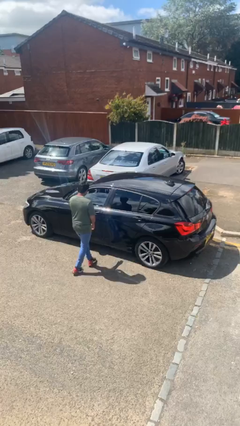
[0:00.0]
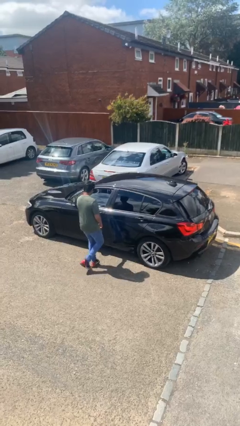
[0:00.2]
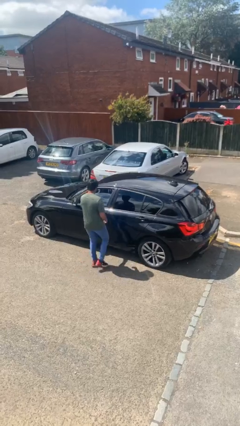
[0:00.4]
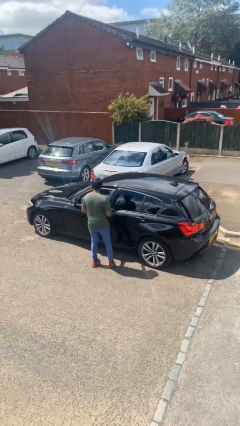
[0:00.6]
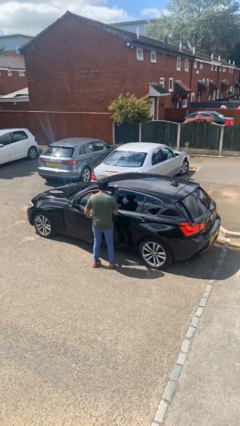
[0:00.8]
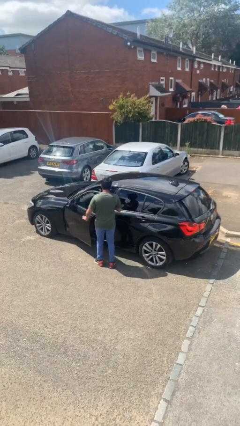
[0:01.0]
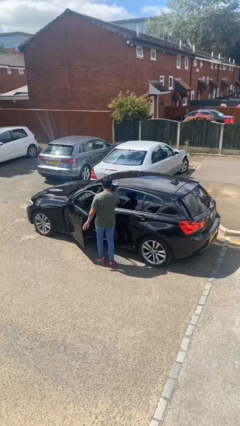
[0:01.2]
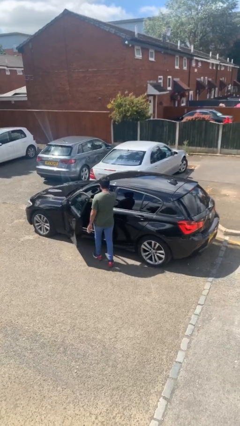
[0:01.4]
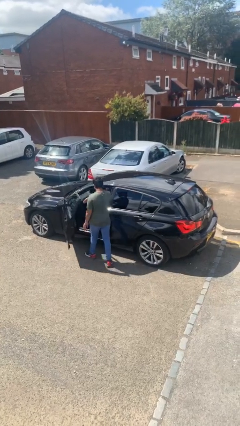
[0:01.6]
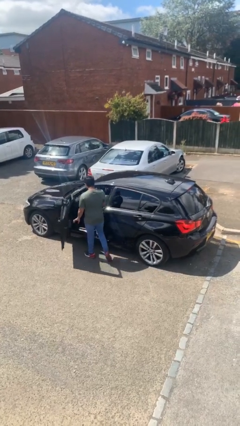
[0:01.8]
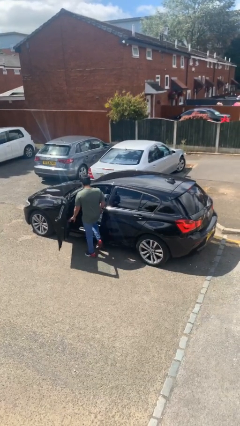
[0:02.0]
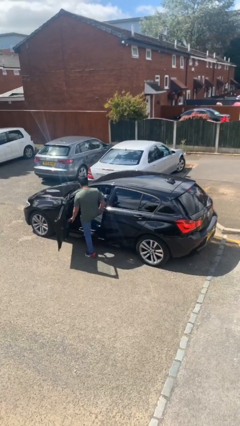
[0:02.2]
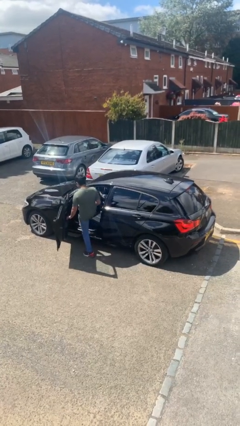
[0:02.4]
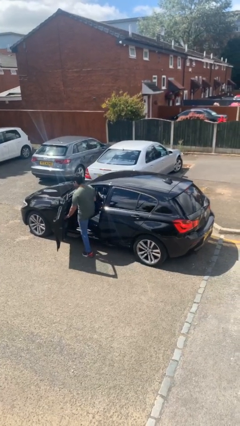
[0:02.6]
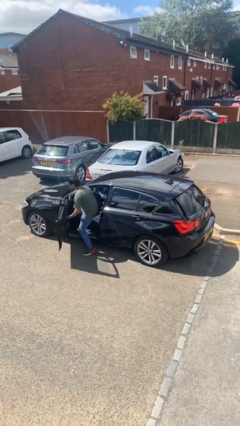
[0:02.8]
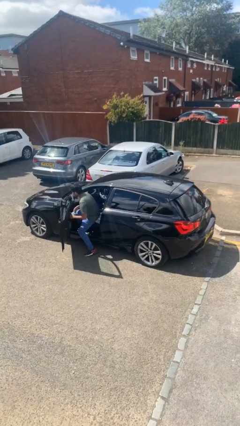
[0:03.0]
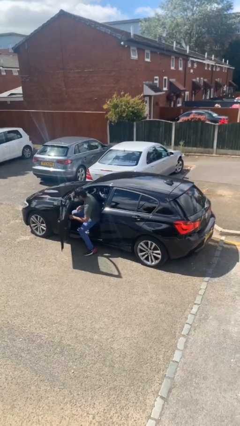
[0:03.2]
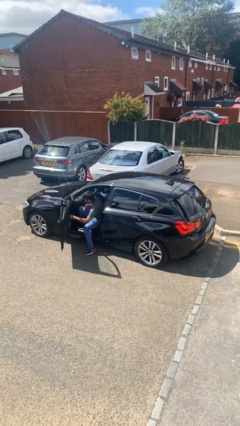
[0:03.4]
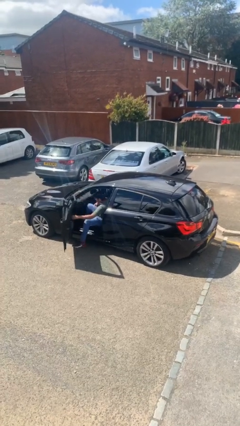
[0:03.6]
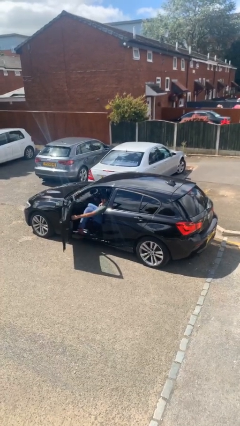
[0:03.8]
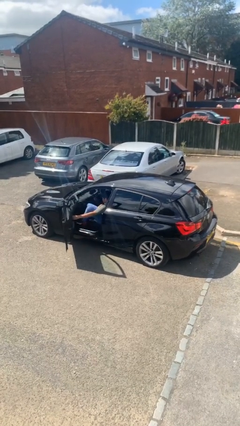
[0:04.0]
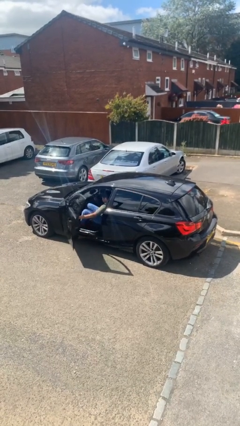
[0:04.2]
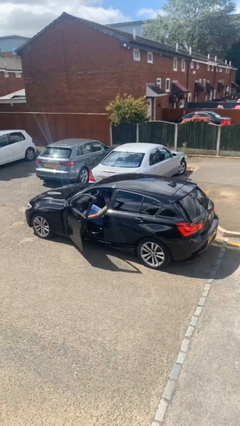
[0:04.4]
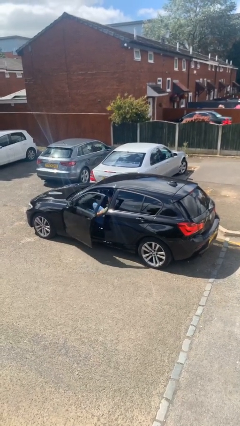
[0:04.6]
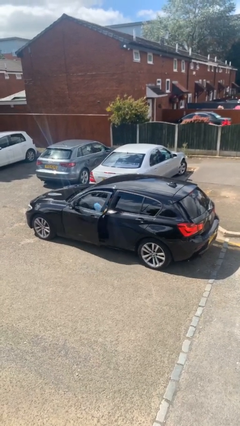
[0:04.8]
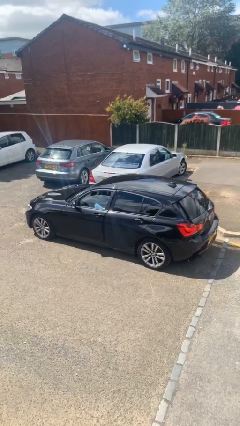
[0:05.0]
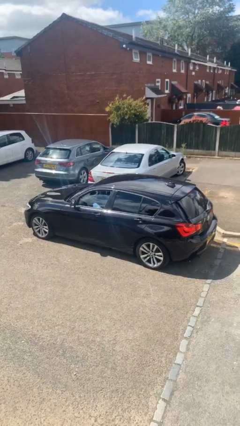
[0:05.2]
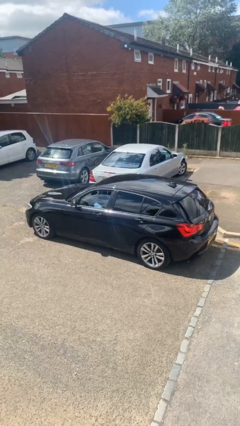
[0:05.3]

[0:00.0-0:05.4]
car picks up person

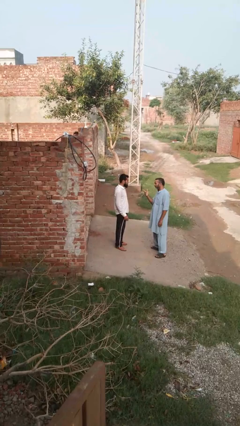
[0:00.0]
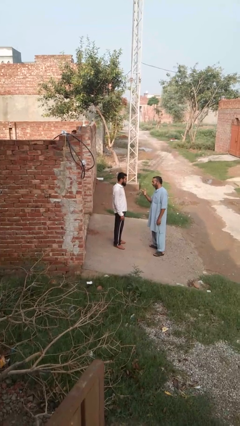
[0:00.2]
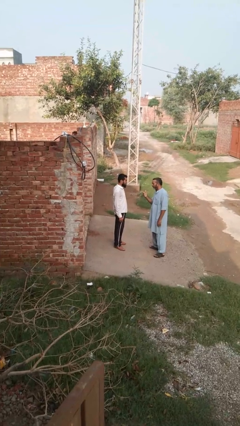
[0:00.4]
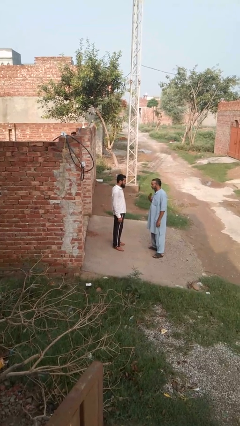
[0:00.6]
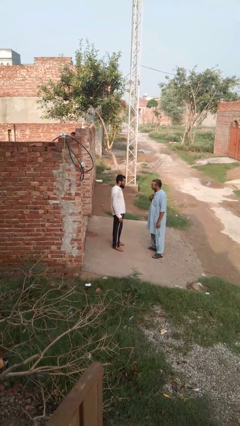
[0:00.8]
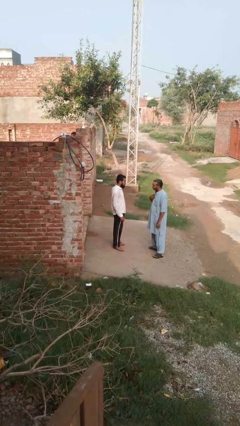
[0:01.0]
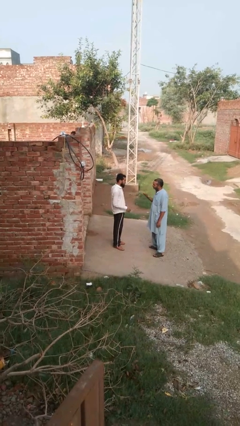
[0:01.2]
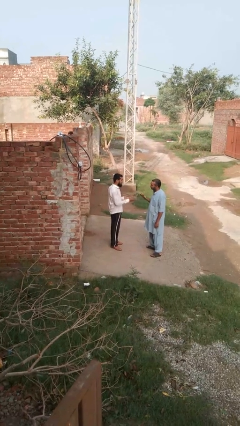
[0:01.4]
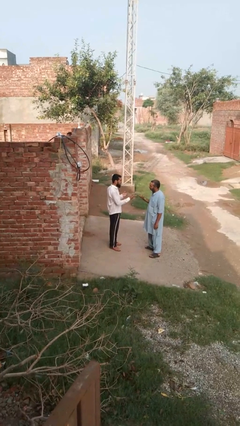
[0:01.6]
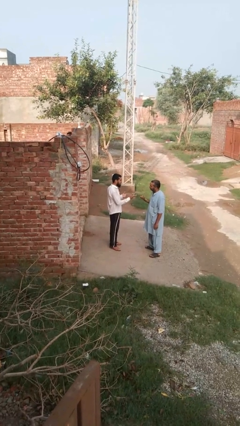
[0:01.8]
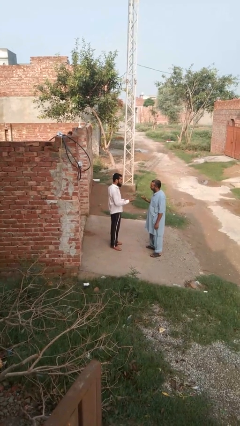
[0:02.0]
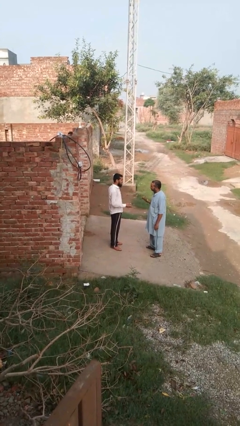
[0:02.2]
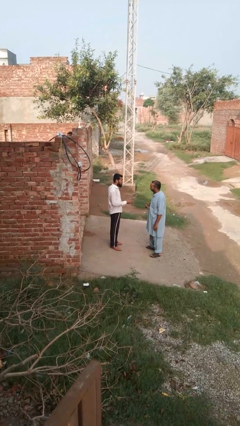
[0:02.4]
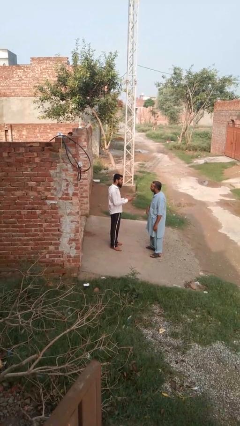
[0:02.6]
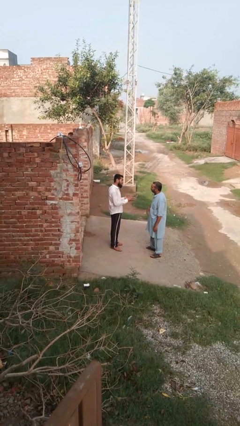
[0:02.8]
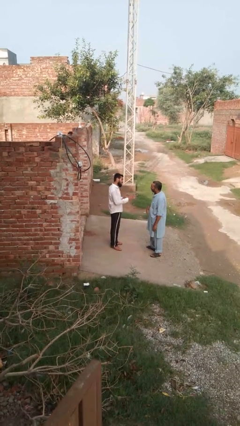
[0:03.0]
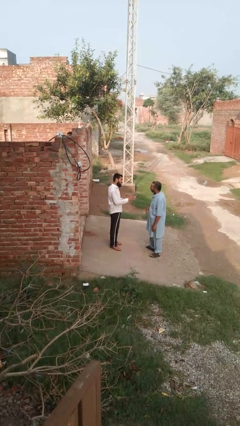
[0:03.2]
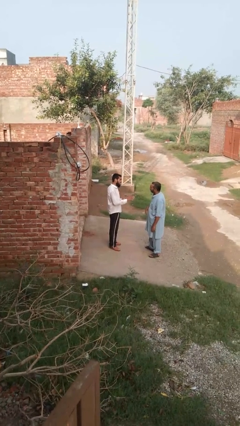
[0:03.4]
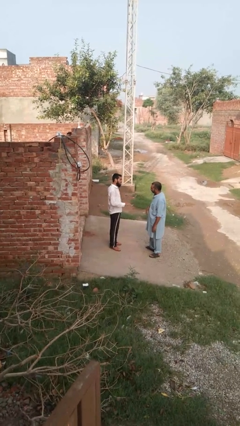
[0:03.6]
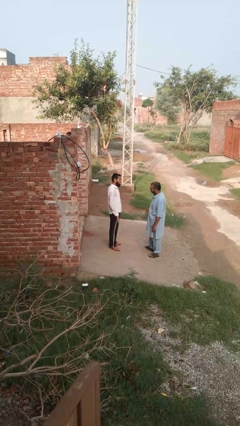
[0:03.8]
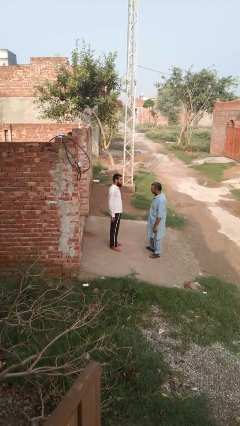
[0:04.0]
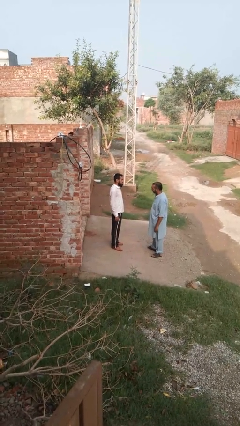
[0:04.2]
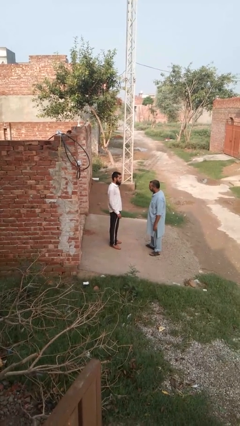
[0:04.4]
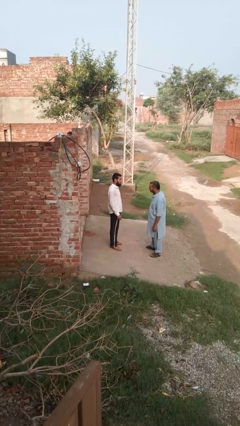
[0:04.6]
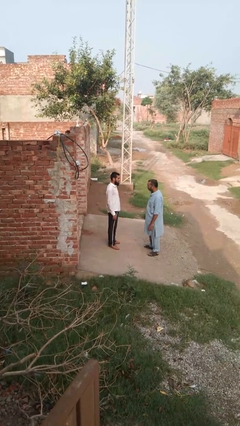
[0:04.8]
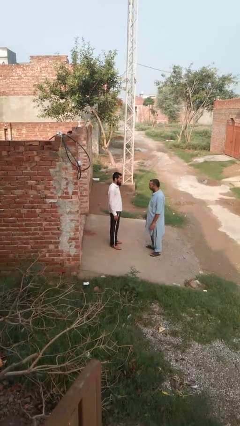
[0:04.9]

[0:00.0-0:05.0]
person talks to person

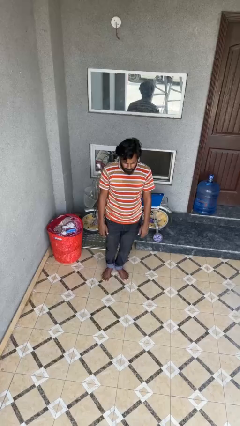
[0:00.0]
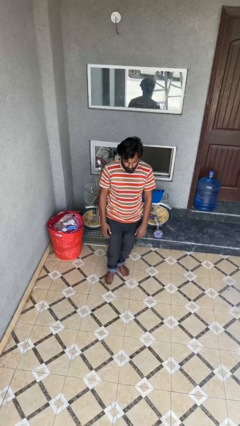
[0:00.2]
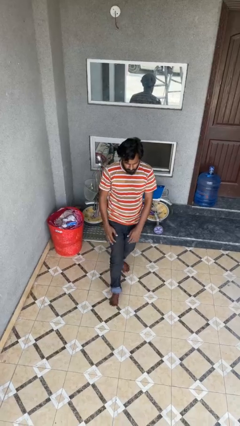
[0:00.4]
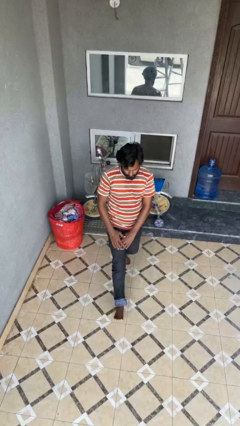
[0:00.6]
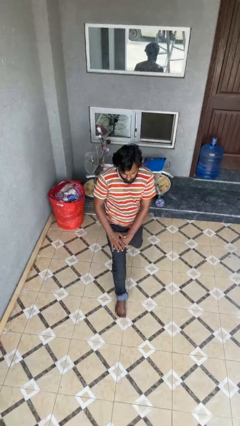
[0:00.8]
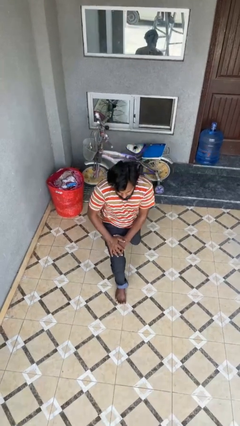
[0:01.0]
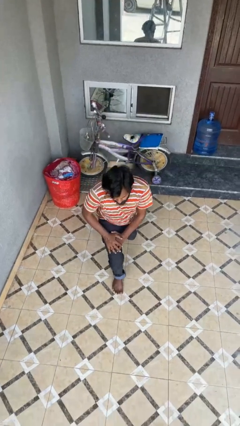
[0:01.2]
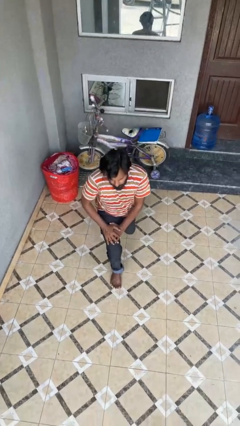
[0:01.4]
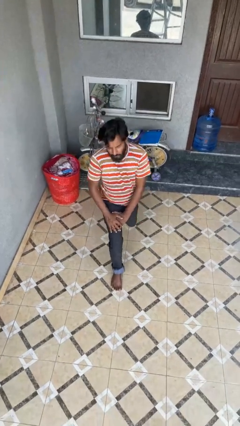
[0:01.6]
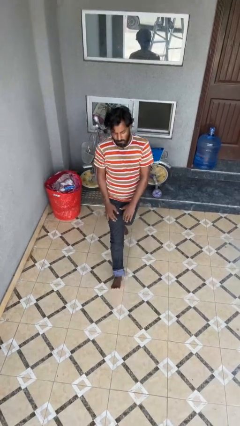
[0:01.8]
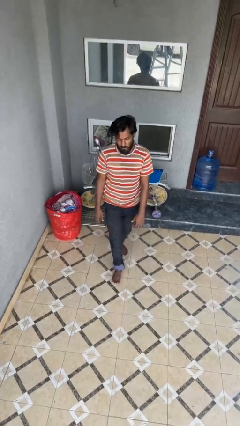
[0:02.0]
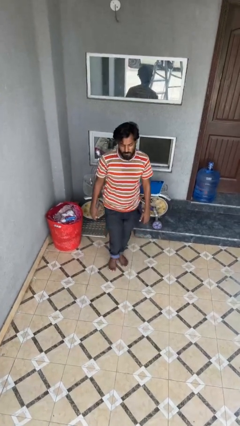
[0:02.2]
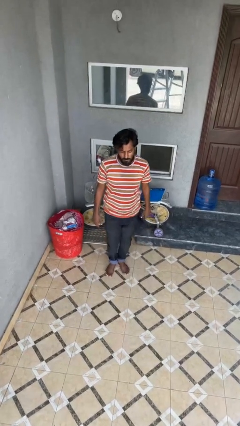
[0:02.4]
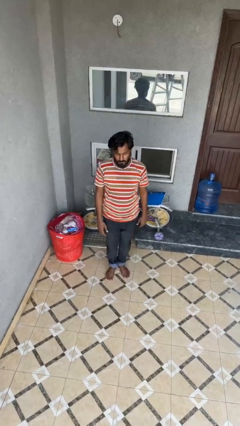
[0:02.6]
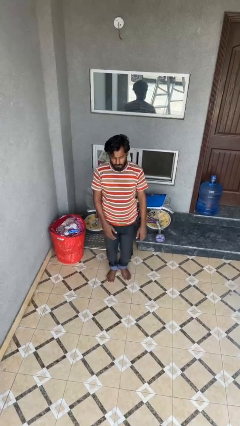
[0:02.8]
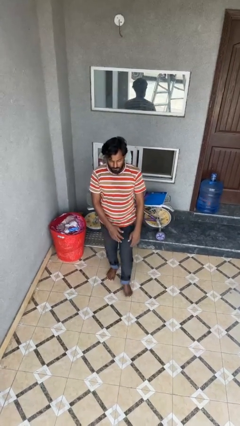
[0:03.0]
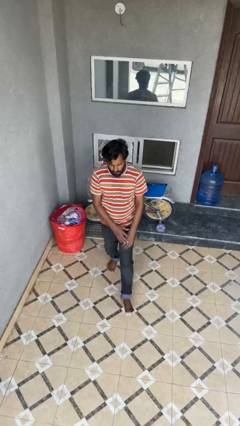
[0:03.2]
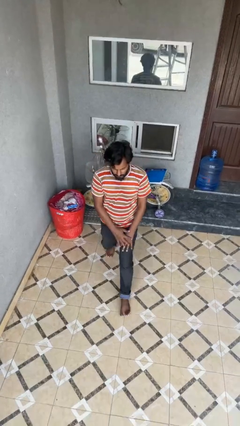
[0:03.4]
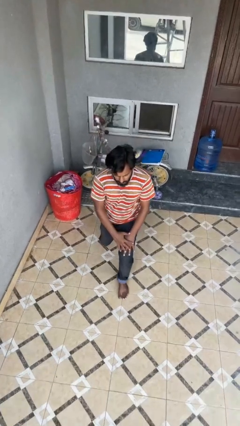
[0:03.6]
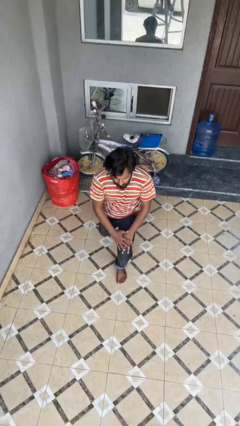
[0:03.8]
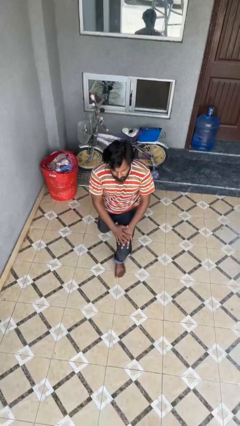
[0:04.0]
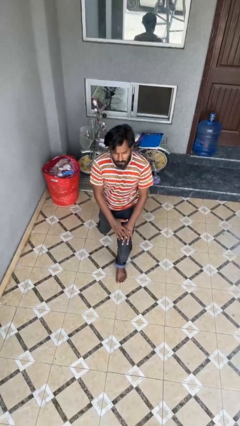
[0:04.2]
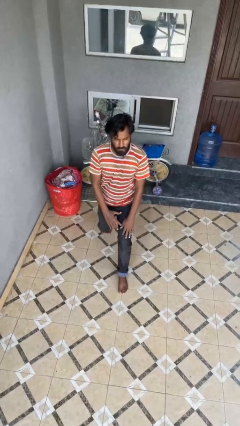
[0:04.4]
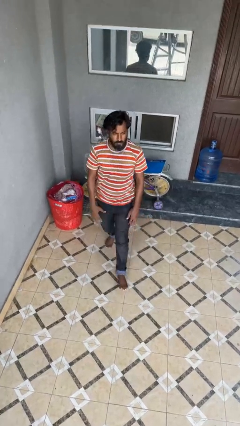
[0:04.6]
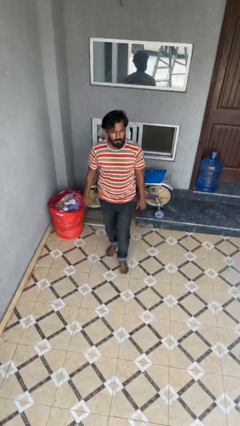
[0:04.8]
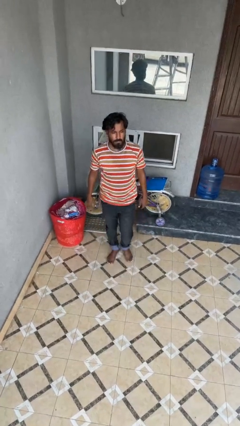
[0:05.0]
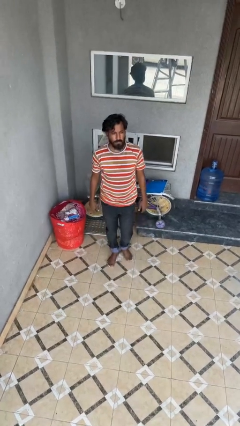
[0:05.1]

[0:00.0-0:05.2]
person exercises with lunges

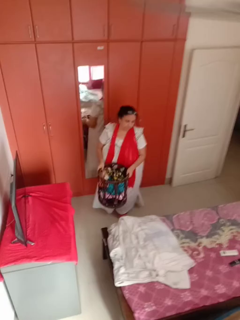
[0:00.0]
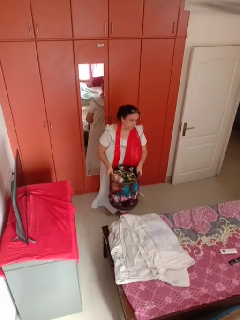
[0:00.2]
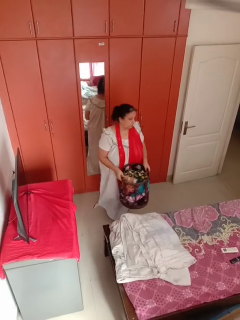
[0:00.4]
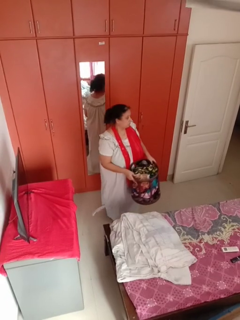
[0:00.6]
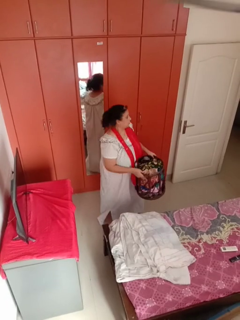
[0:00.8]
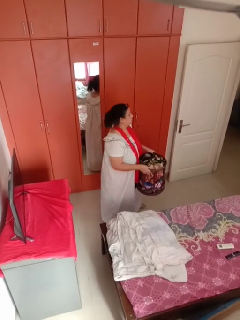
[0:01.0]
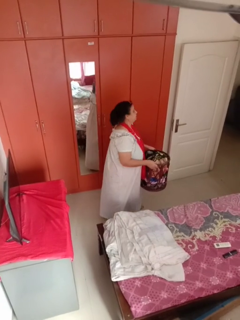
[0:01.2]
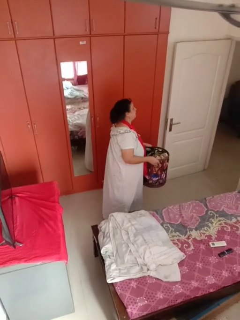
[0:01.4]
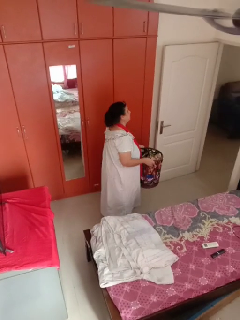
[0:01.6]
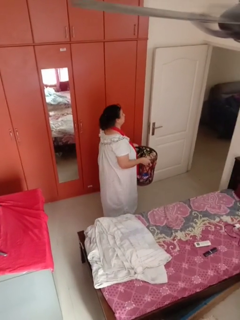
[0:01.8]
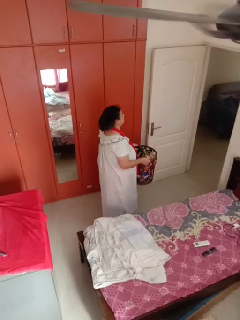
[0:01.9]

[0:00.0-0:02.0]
person carries laundry basket

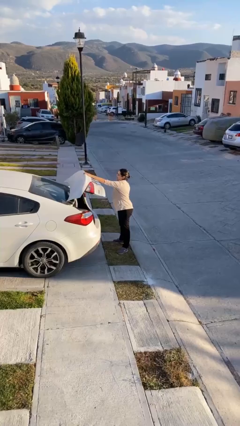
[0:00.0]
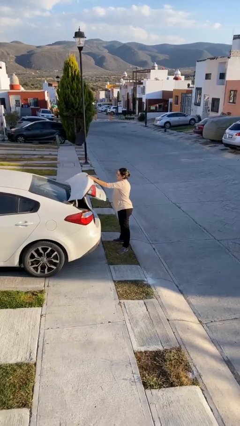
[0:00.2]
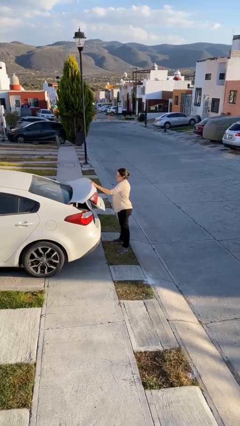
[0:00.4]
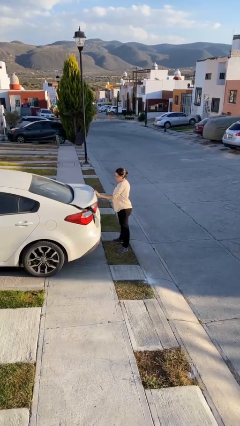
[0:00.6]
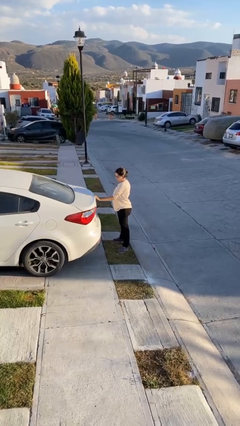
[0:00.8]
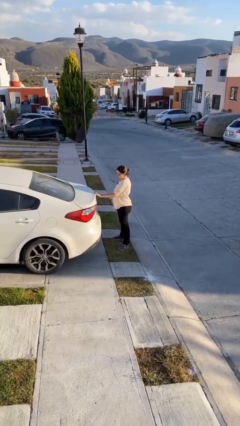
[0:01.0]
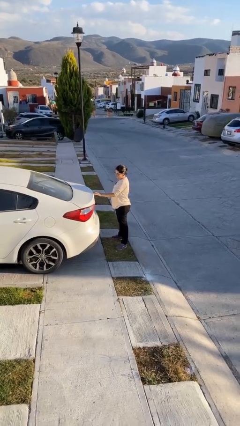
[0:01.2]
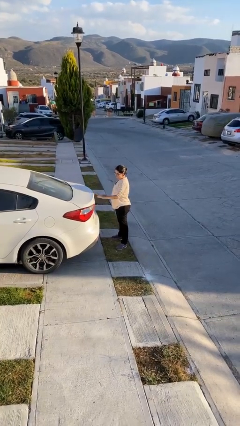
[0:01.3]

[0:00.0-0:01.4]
person closes car trunk
